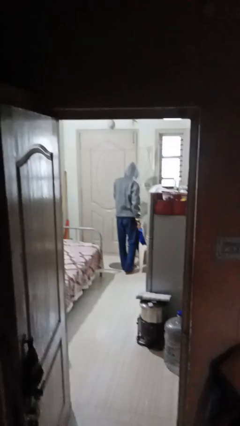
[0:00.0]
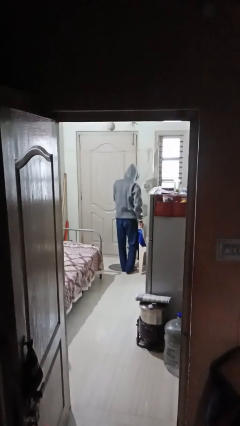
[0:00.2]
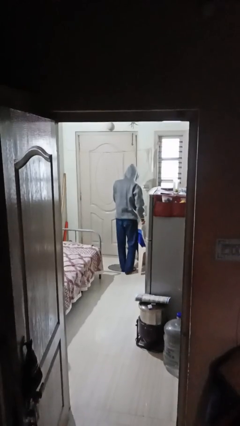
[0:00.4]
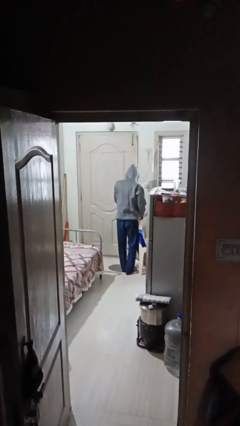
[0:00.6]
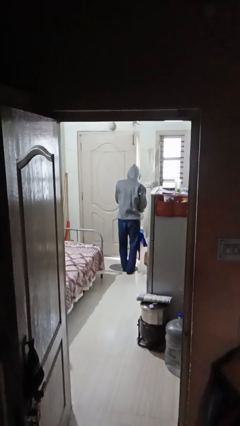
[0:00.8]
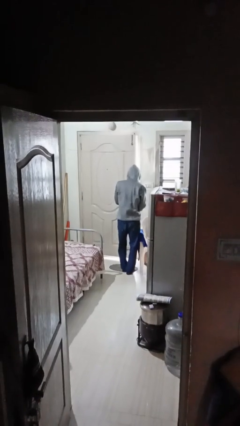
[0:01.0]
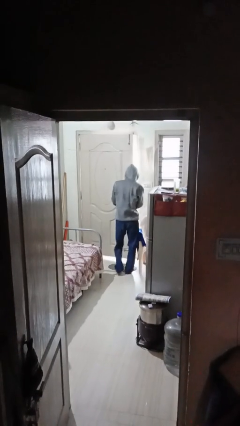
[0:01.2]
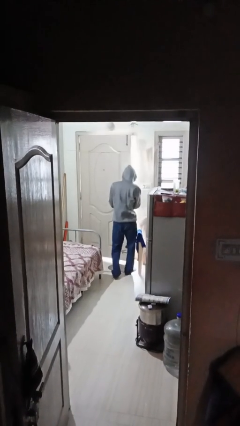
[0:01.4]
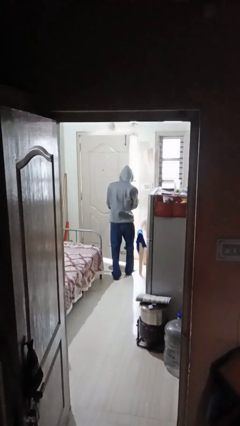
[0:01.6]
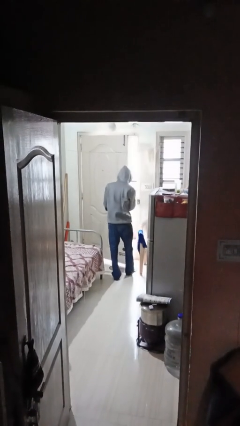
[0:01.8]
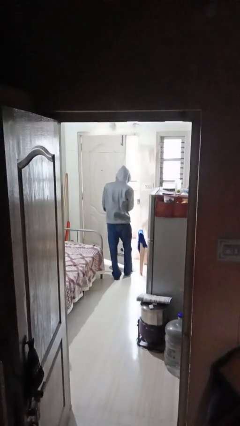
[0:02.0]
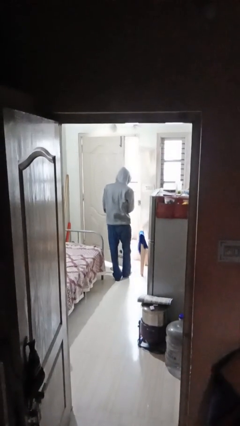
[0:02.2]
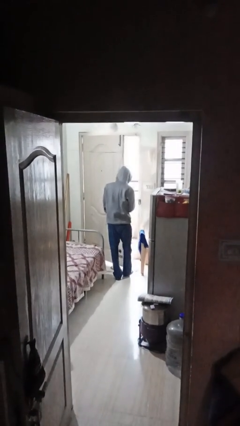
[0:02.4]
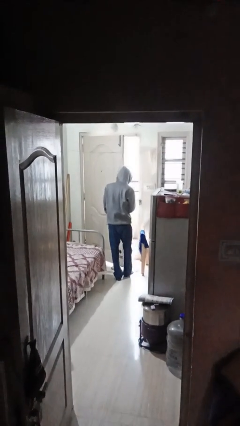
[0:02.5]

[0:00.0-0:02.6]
person opens facility door

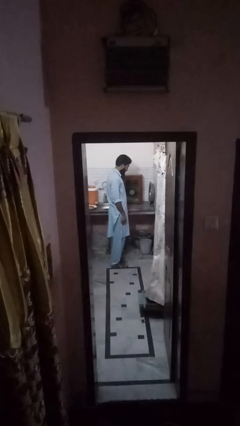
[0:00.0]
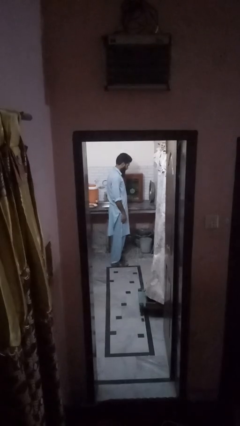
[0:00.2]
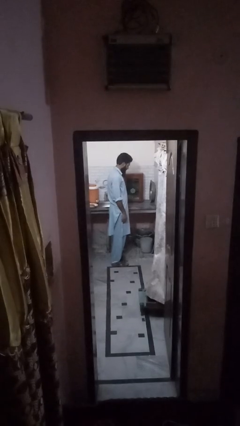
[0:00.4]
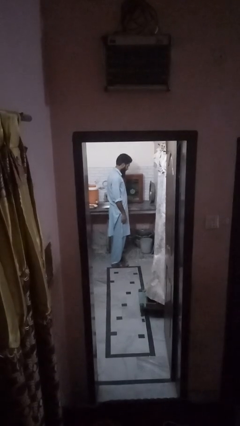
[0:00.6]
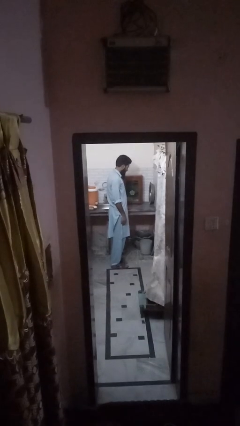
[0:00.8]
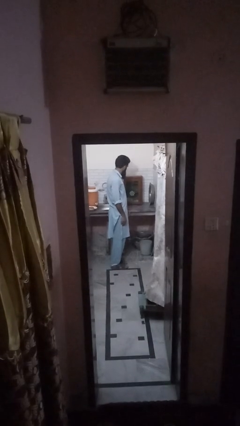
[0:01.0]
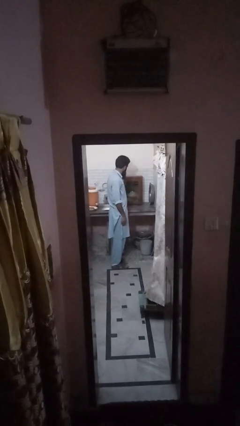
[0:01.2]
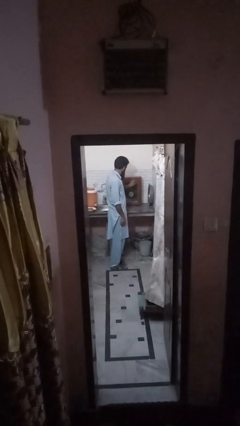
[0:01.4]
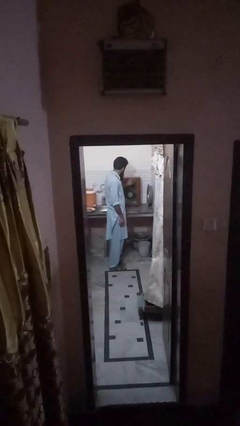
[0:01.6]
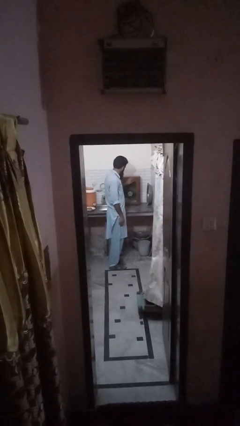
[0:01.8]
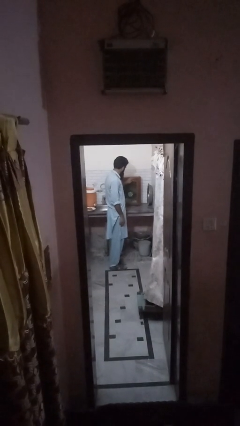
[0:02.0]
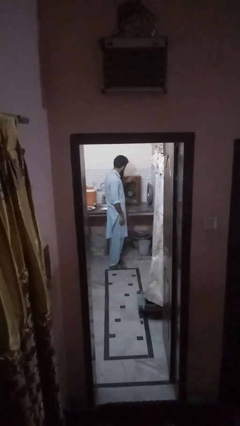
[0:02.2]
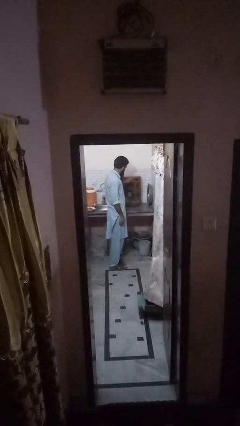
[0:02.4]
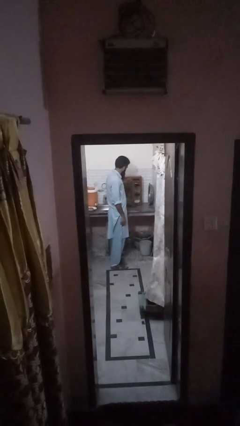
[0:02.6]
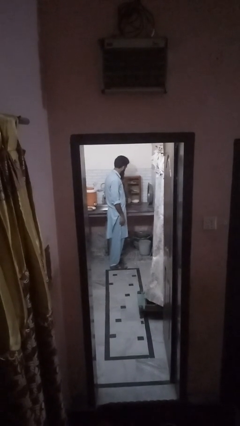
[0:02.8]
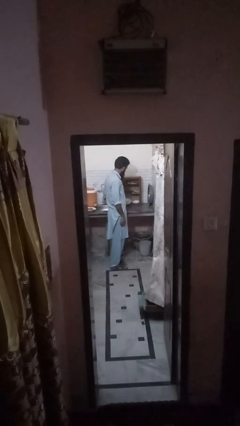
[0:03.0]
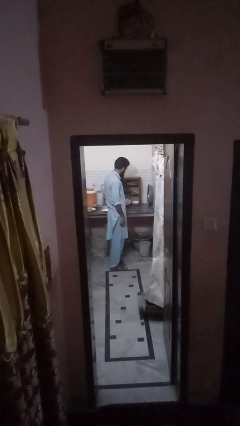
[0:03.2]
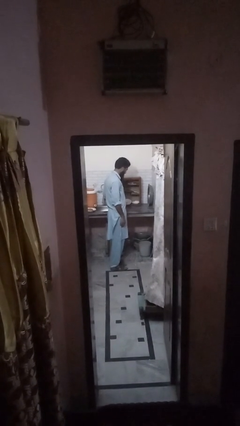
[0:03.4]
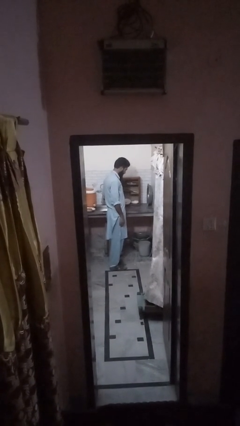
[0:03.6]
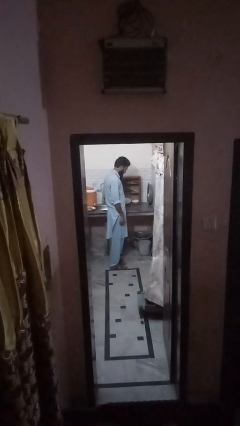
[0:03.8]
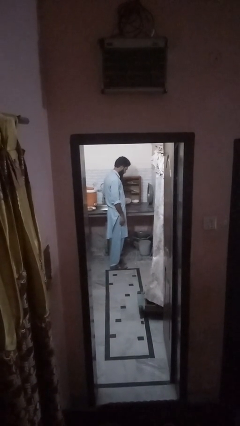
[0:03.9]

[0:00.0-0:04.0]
person opens cabinet

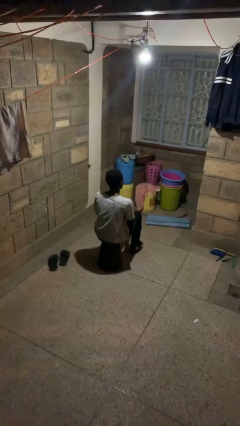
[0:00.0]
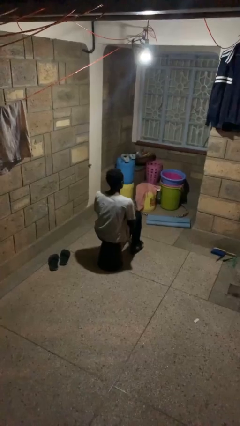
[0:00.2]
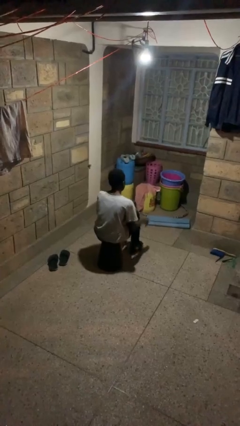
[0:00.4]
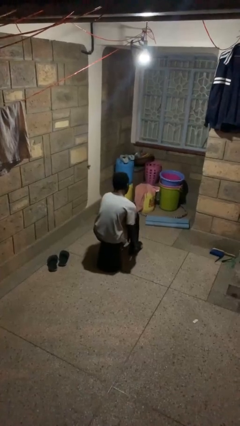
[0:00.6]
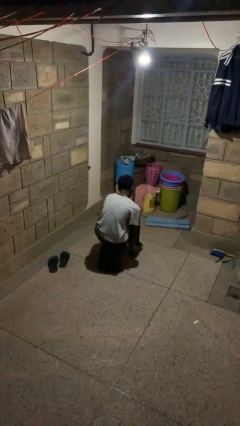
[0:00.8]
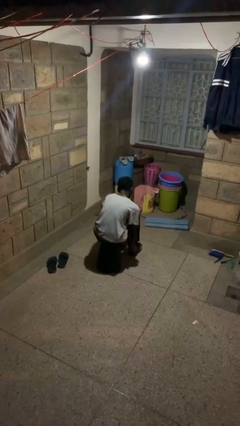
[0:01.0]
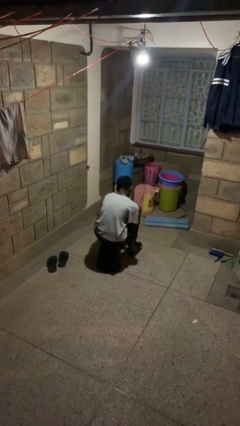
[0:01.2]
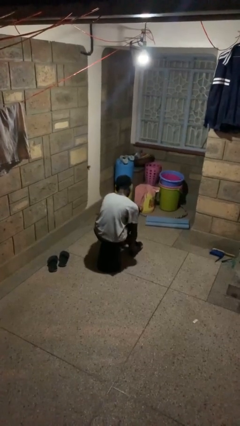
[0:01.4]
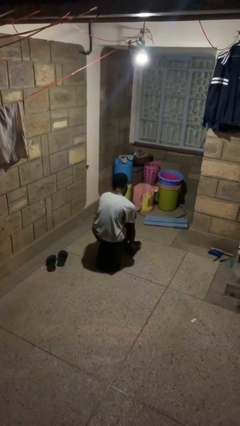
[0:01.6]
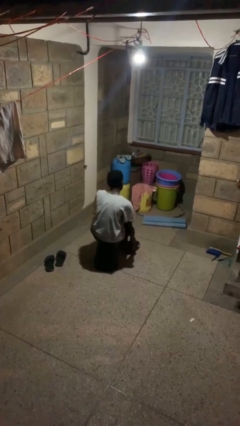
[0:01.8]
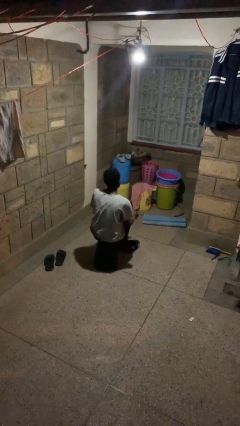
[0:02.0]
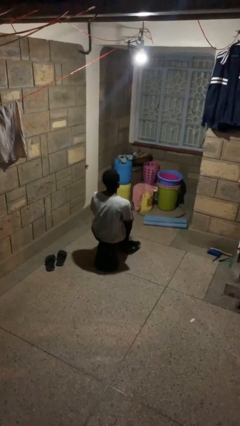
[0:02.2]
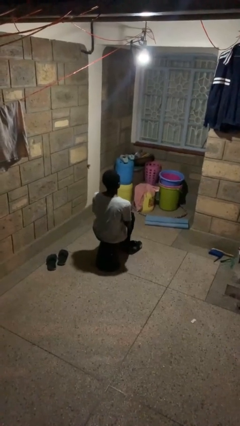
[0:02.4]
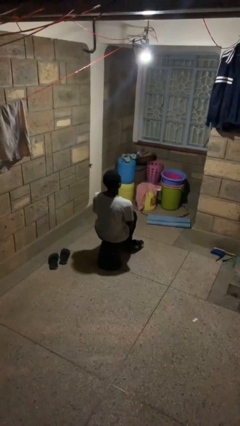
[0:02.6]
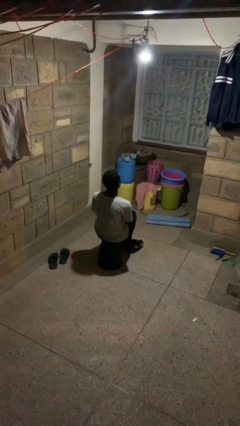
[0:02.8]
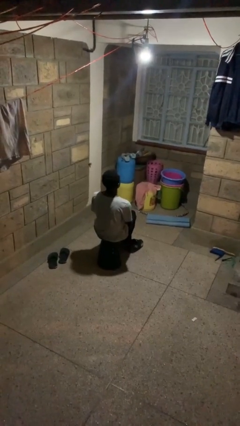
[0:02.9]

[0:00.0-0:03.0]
person takes off shoes

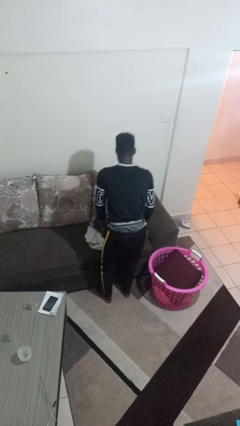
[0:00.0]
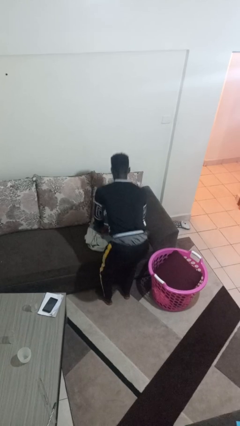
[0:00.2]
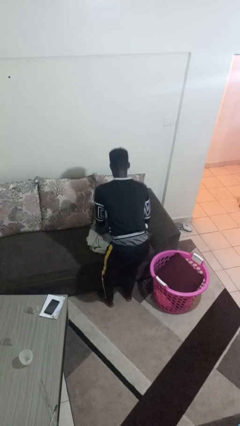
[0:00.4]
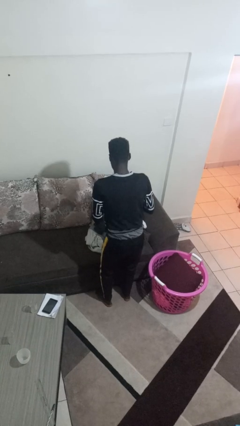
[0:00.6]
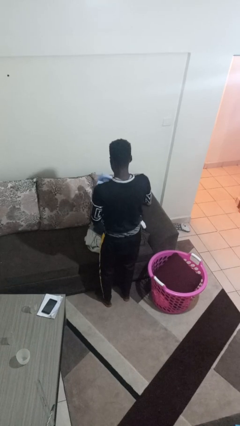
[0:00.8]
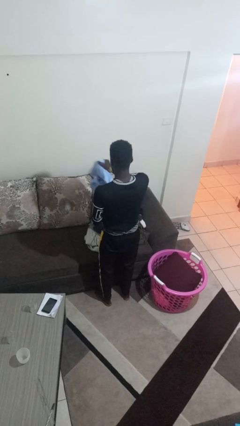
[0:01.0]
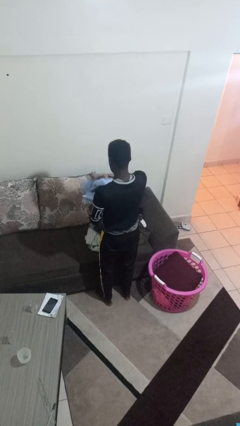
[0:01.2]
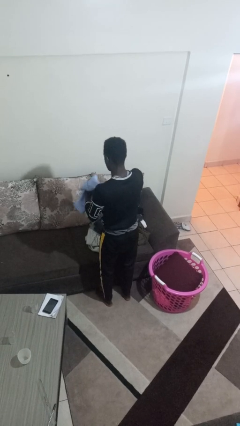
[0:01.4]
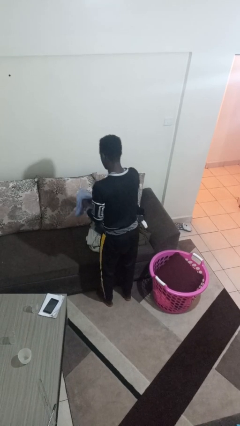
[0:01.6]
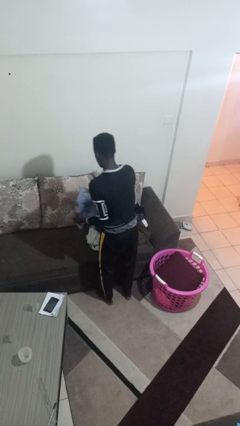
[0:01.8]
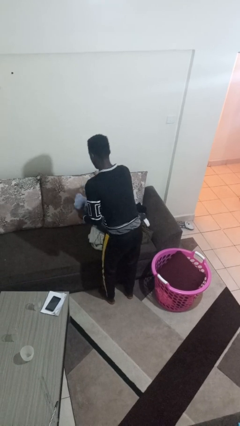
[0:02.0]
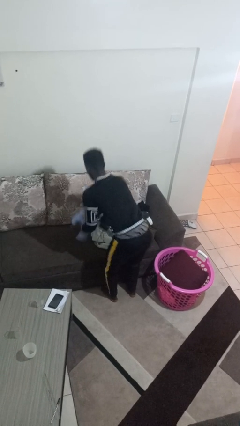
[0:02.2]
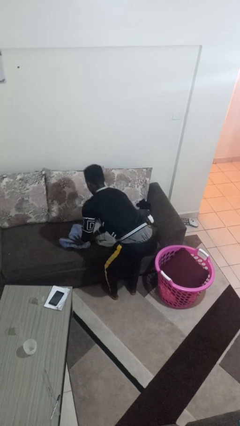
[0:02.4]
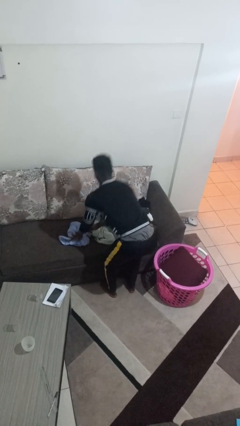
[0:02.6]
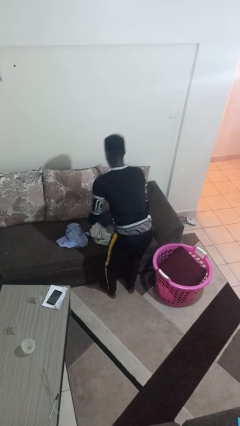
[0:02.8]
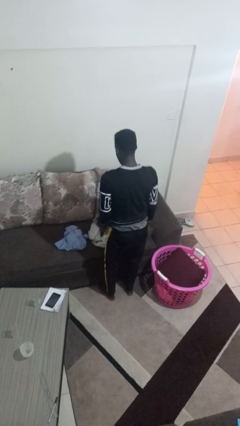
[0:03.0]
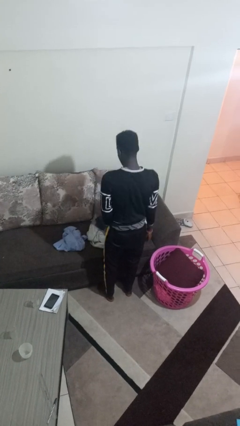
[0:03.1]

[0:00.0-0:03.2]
person folds shirt

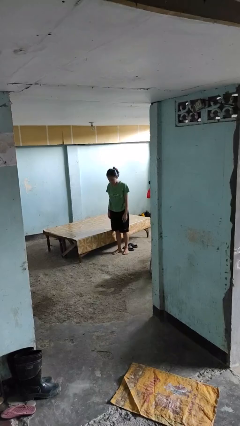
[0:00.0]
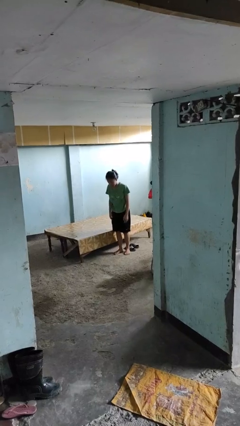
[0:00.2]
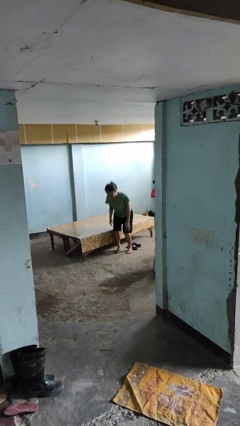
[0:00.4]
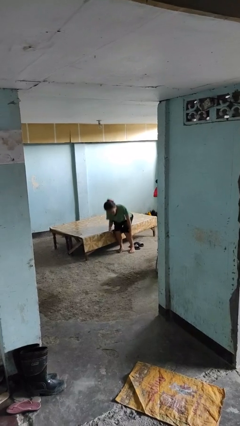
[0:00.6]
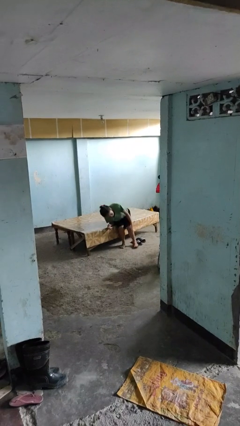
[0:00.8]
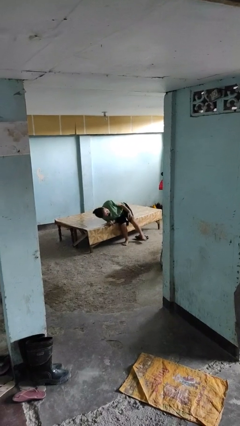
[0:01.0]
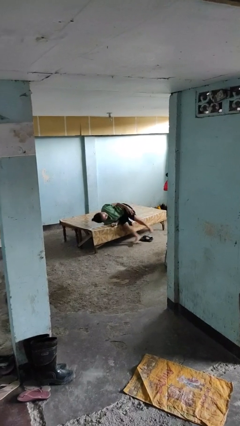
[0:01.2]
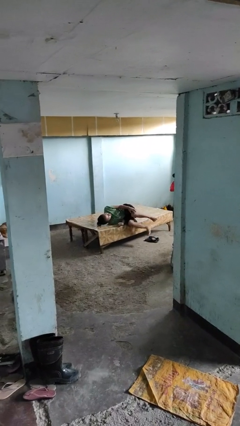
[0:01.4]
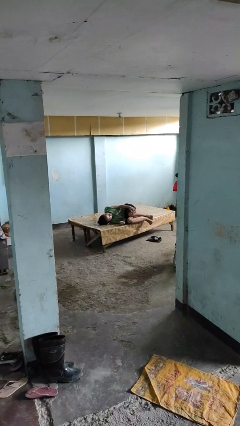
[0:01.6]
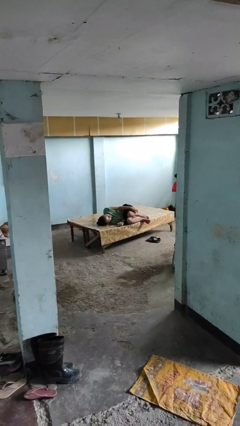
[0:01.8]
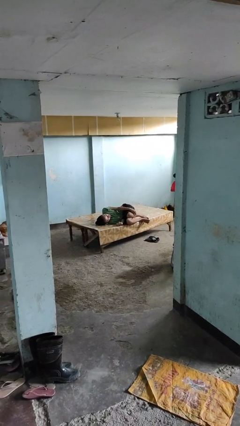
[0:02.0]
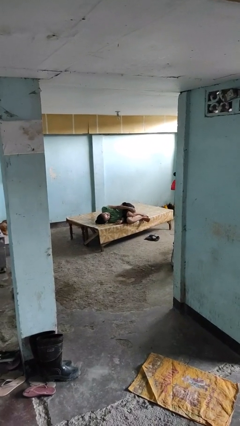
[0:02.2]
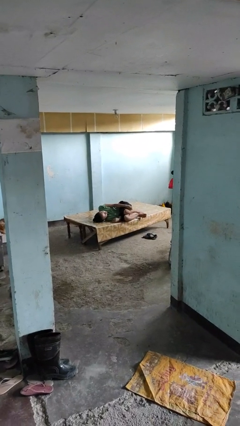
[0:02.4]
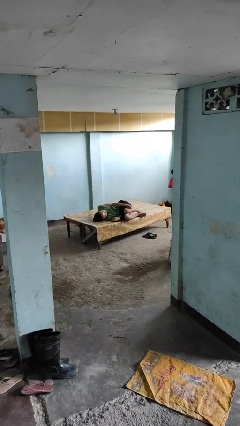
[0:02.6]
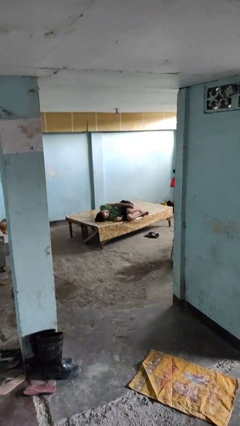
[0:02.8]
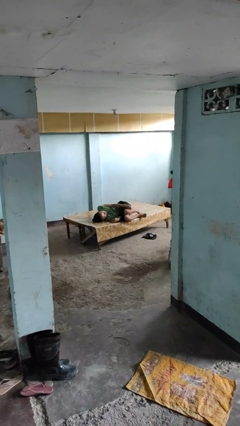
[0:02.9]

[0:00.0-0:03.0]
person lies down on bed

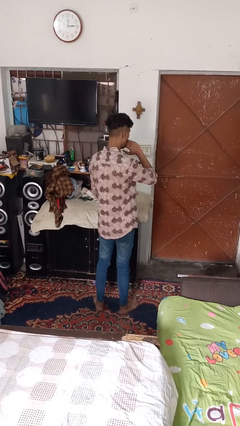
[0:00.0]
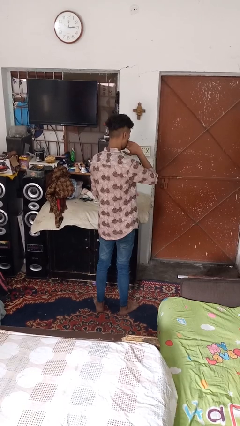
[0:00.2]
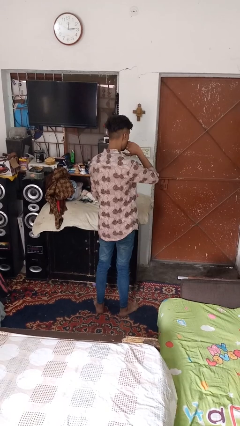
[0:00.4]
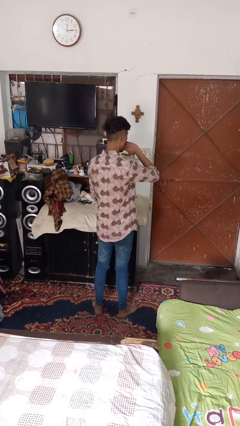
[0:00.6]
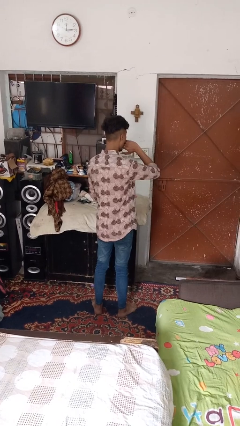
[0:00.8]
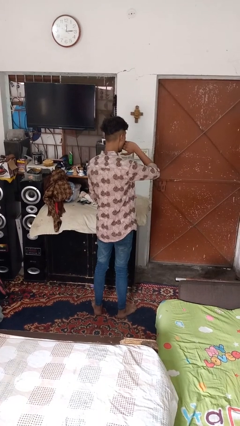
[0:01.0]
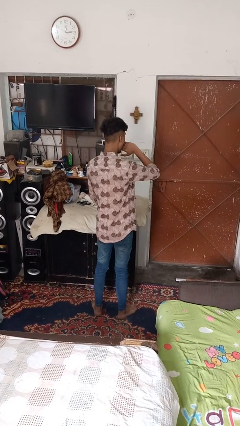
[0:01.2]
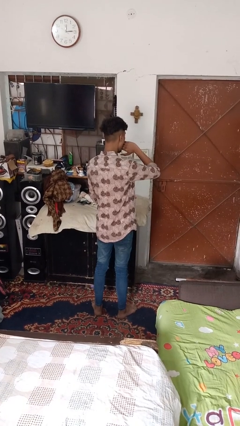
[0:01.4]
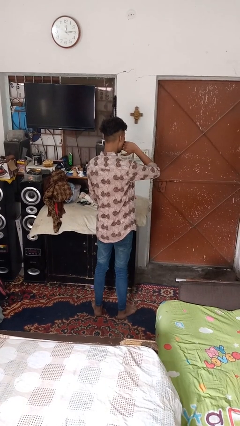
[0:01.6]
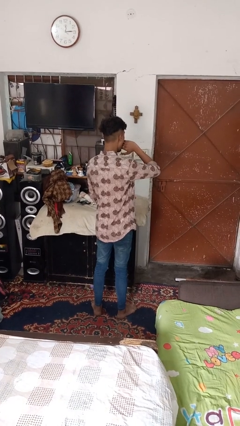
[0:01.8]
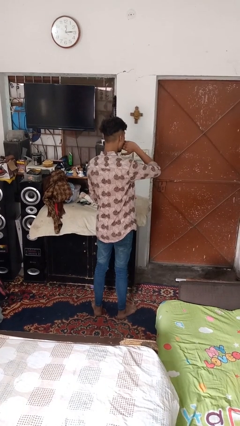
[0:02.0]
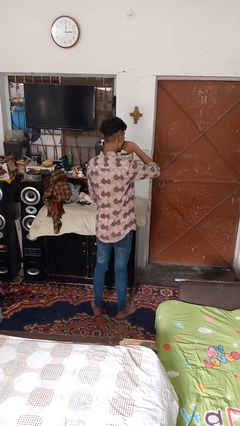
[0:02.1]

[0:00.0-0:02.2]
person yawns
